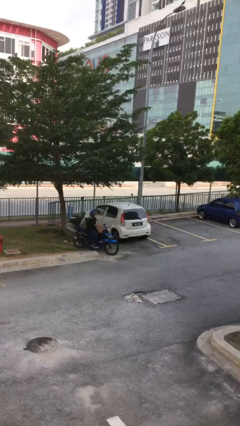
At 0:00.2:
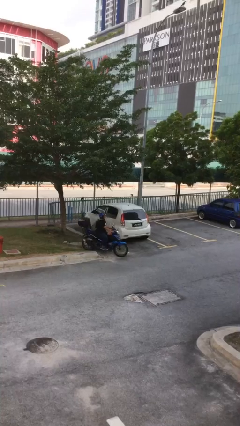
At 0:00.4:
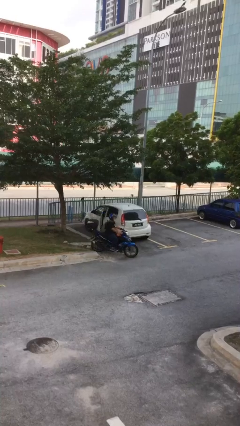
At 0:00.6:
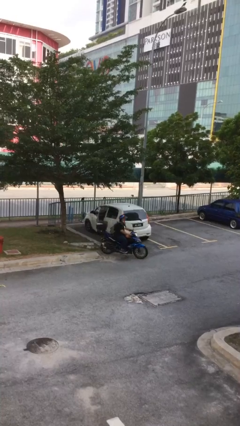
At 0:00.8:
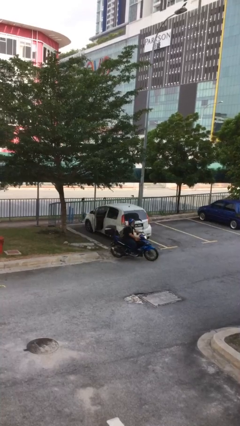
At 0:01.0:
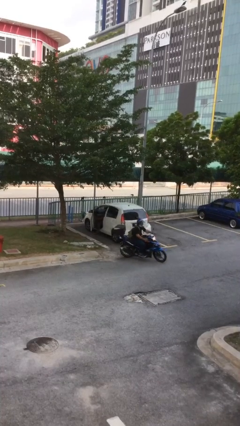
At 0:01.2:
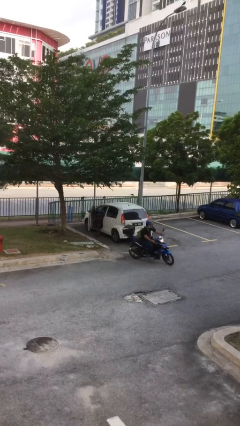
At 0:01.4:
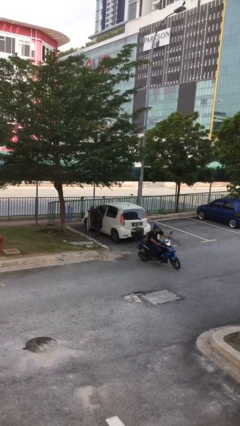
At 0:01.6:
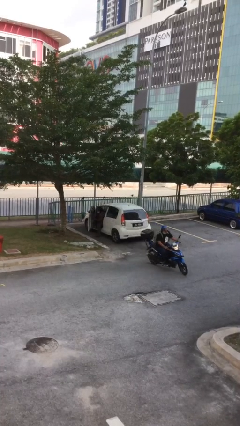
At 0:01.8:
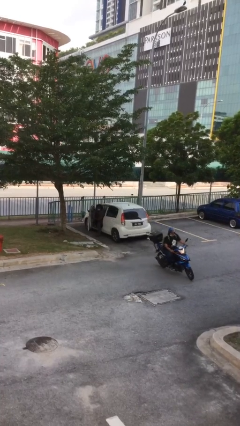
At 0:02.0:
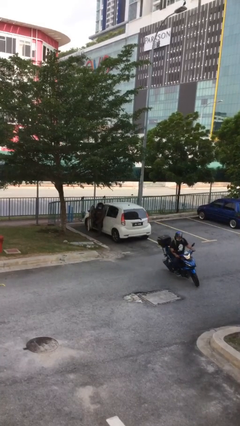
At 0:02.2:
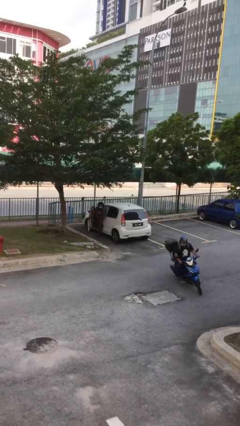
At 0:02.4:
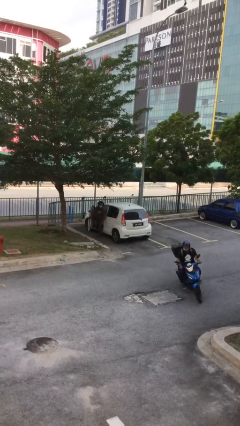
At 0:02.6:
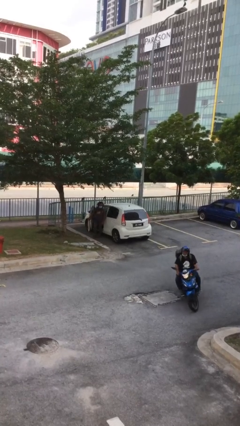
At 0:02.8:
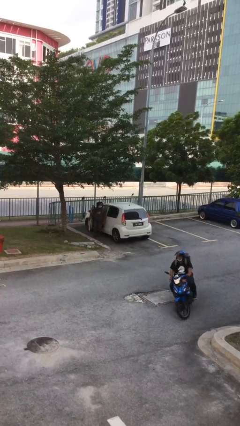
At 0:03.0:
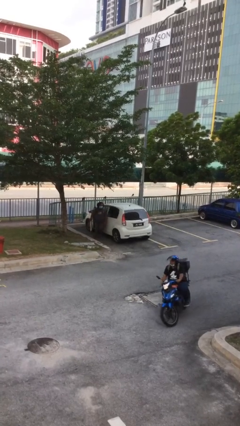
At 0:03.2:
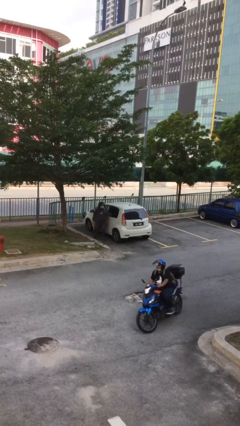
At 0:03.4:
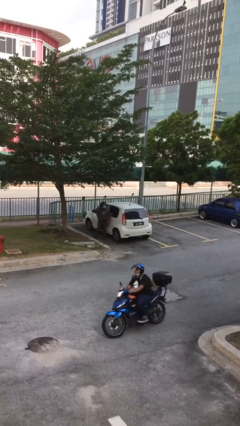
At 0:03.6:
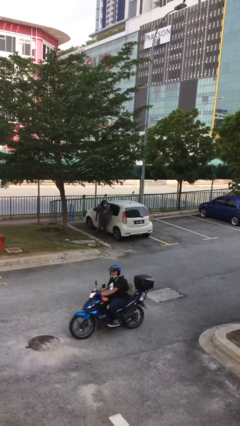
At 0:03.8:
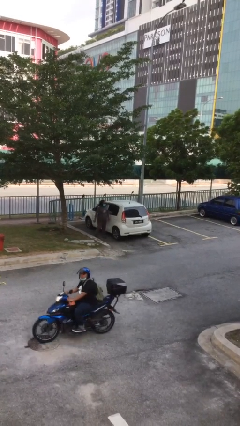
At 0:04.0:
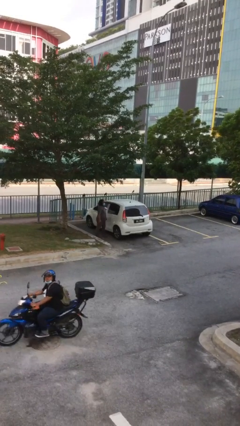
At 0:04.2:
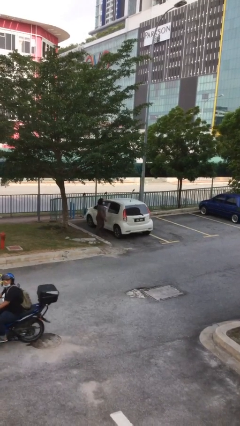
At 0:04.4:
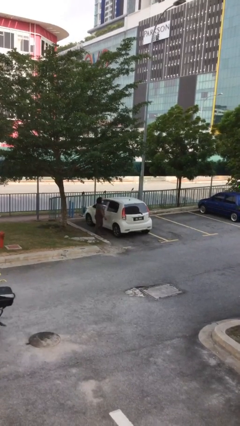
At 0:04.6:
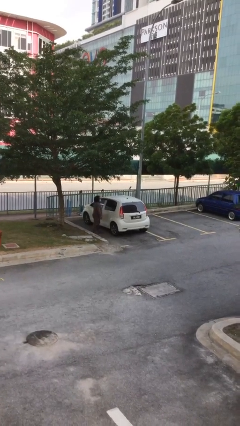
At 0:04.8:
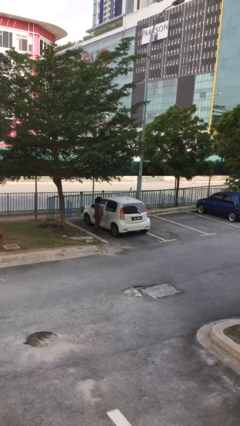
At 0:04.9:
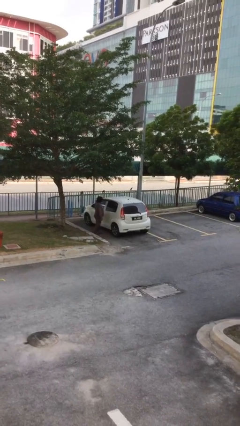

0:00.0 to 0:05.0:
car drops off person

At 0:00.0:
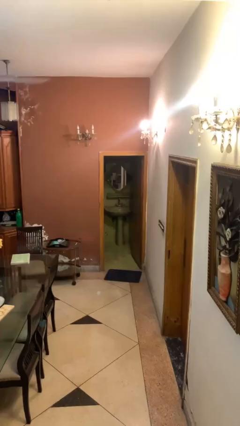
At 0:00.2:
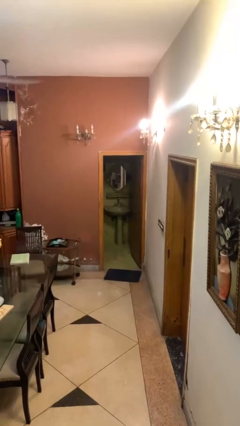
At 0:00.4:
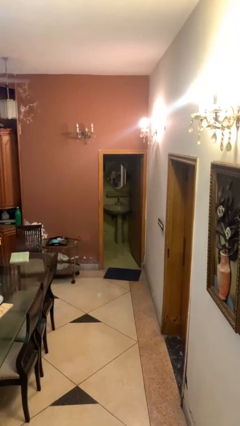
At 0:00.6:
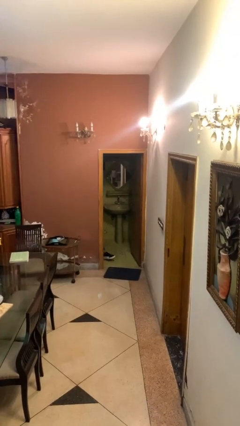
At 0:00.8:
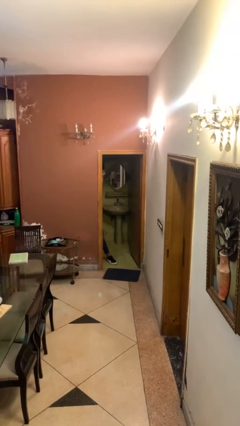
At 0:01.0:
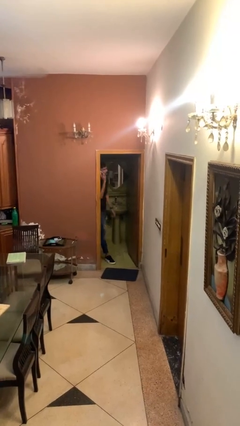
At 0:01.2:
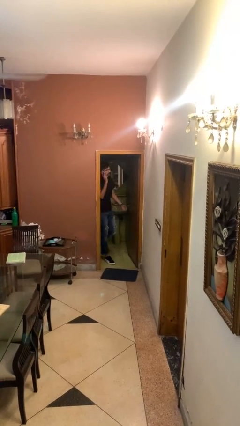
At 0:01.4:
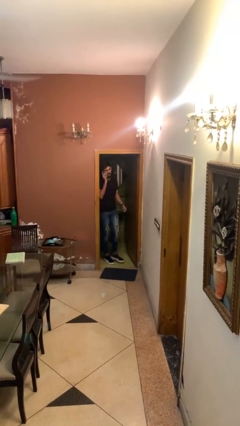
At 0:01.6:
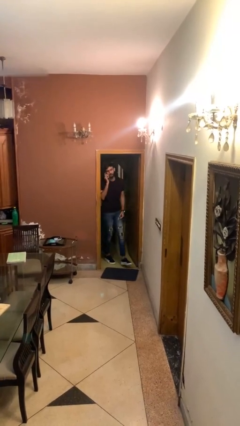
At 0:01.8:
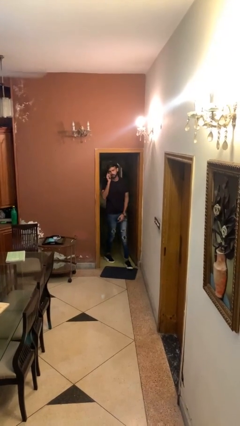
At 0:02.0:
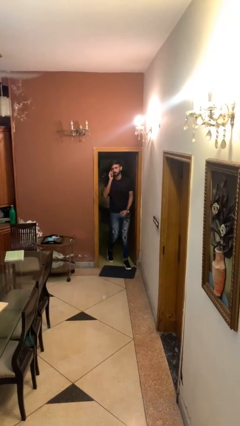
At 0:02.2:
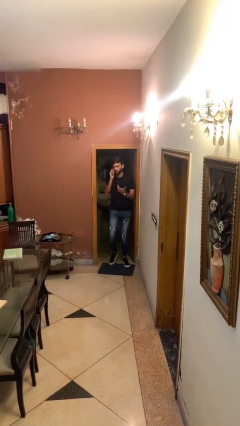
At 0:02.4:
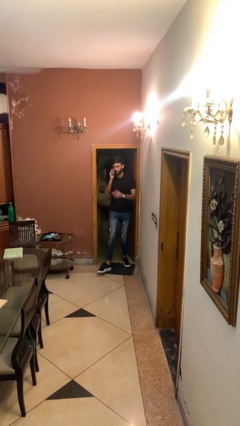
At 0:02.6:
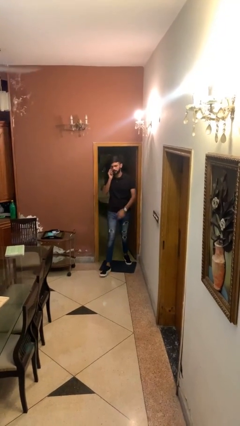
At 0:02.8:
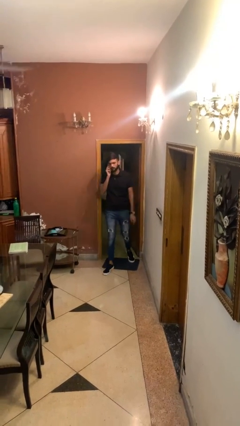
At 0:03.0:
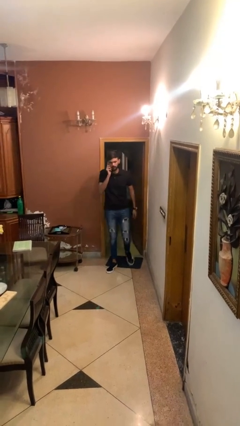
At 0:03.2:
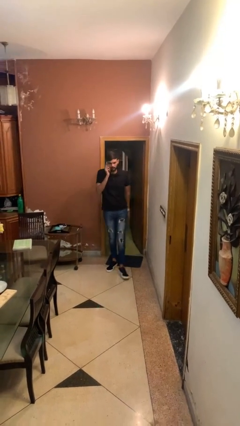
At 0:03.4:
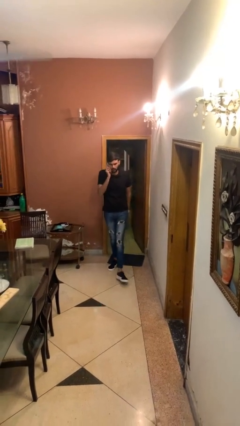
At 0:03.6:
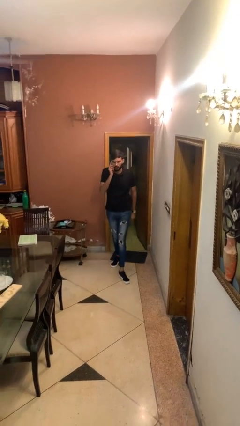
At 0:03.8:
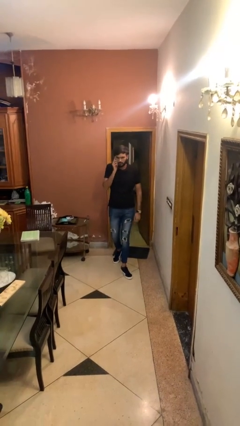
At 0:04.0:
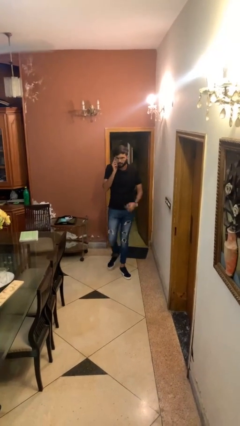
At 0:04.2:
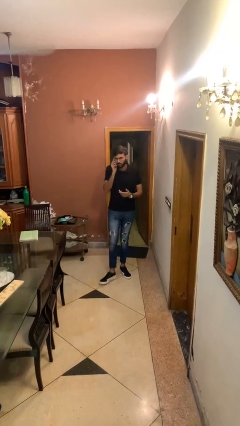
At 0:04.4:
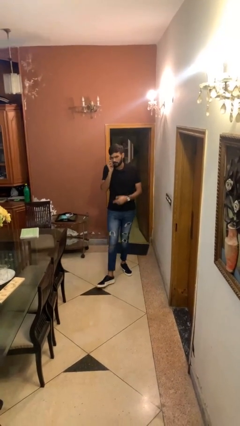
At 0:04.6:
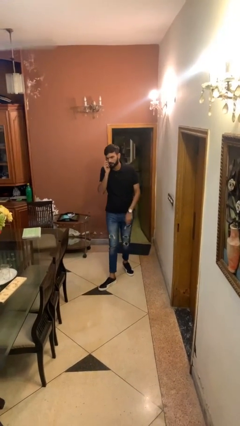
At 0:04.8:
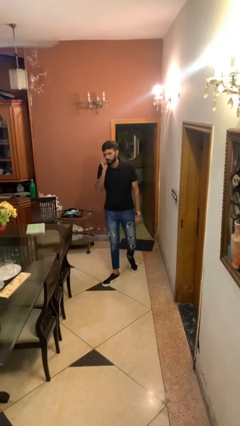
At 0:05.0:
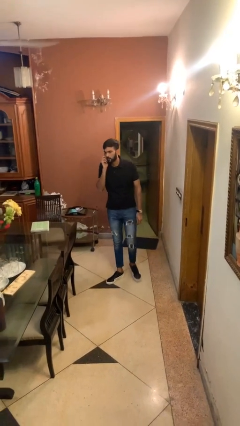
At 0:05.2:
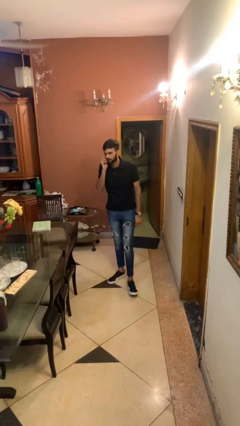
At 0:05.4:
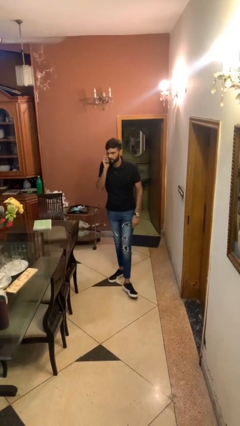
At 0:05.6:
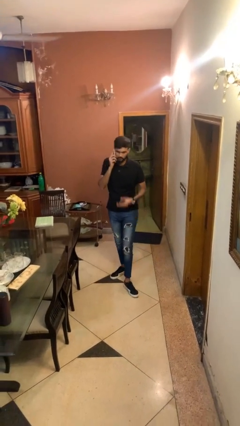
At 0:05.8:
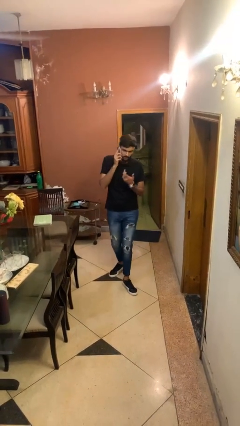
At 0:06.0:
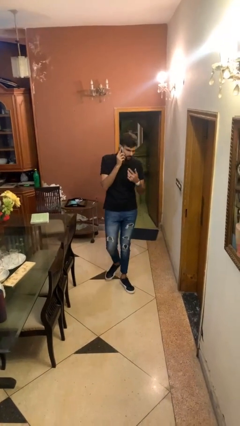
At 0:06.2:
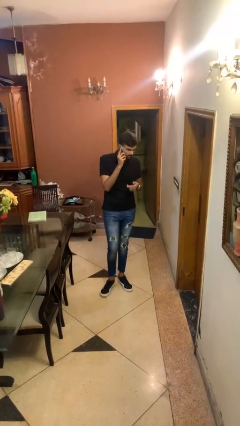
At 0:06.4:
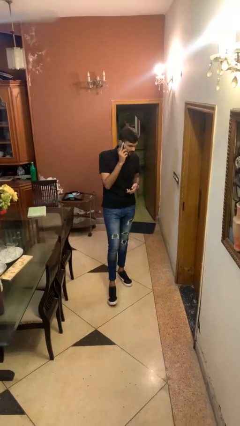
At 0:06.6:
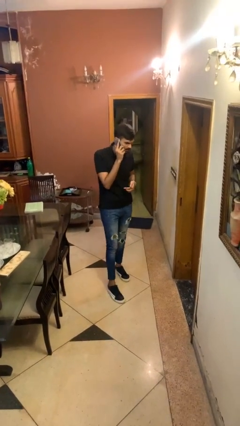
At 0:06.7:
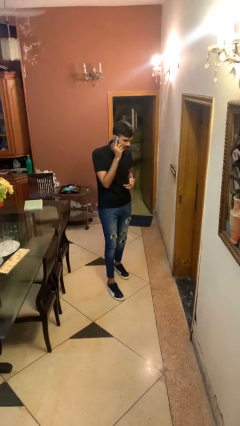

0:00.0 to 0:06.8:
person enters scene through structure

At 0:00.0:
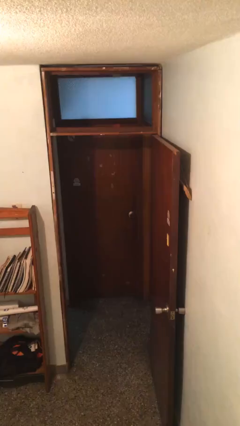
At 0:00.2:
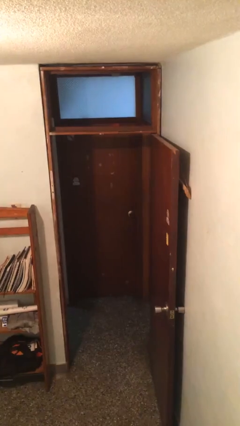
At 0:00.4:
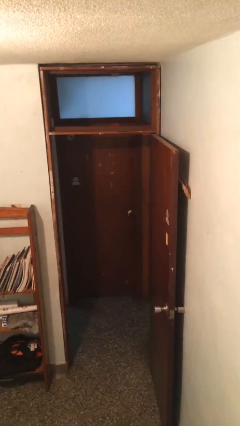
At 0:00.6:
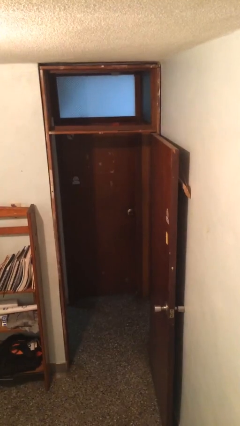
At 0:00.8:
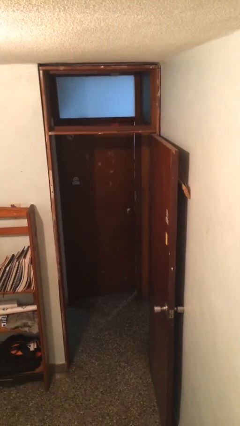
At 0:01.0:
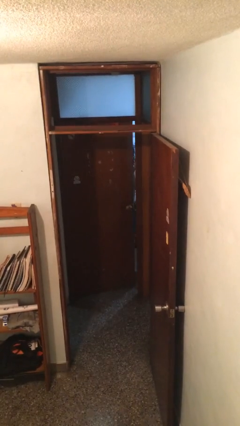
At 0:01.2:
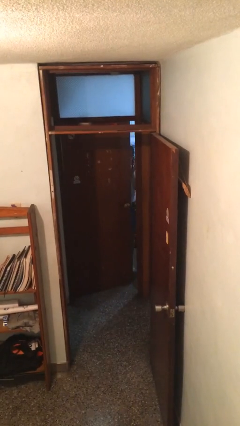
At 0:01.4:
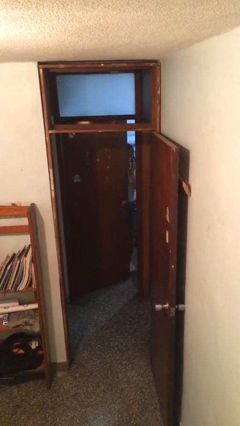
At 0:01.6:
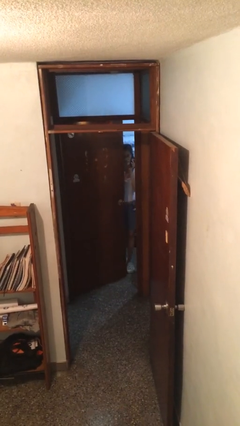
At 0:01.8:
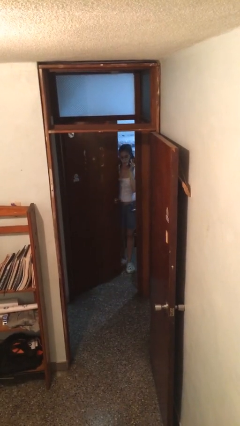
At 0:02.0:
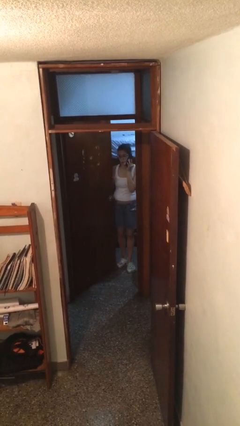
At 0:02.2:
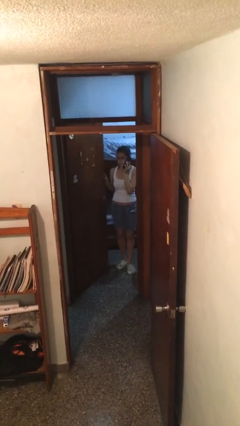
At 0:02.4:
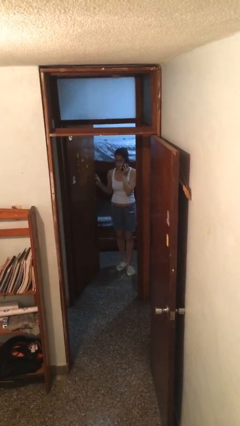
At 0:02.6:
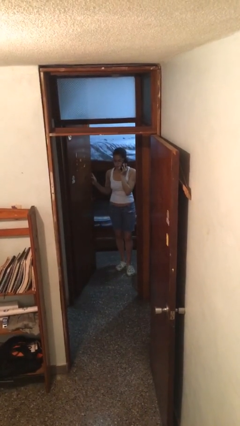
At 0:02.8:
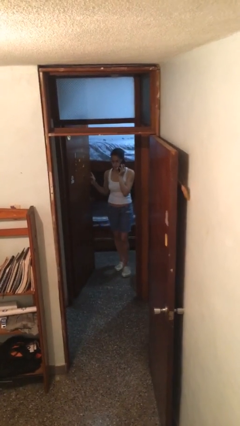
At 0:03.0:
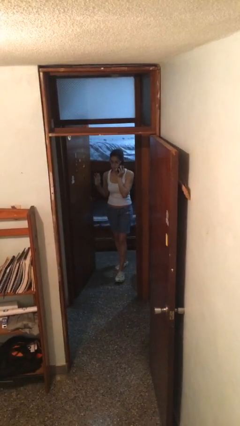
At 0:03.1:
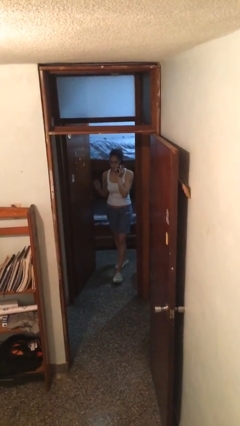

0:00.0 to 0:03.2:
person opens facility door

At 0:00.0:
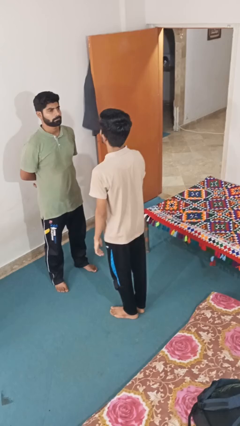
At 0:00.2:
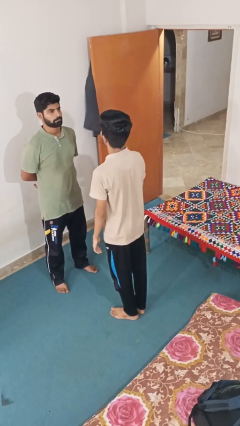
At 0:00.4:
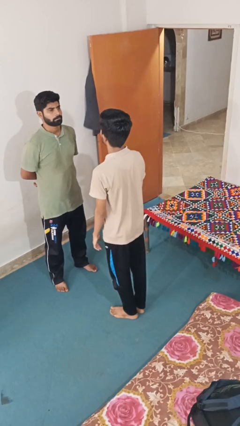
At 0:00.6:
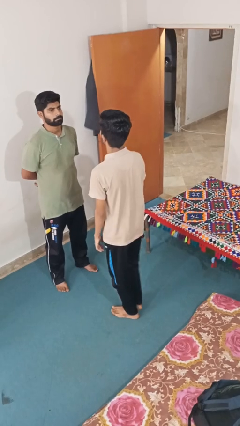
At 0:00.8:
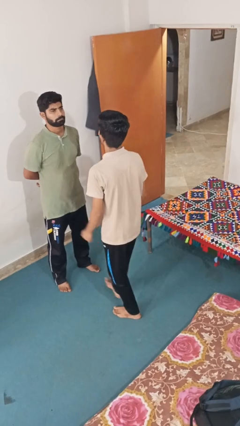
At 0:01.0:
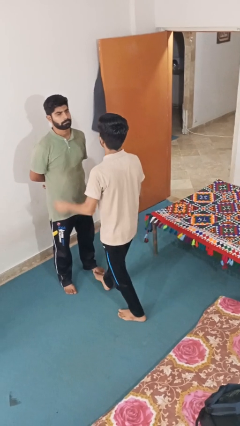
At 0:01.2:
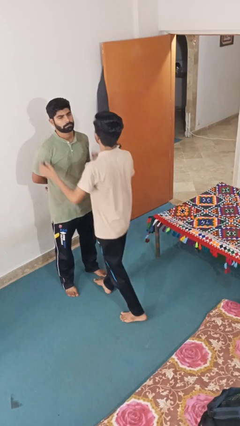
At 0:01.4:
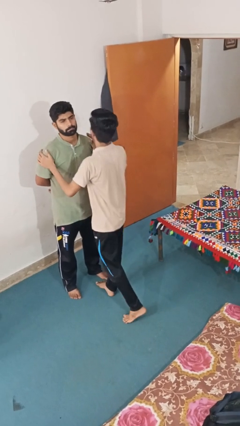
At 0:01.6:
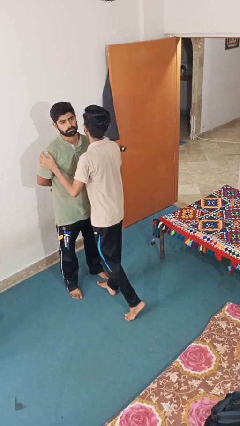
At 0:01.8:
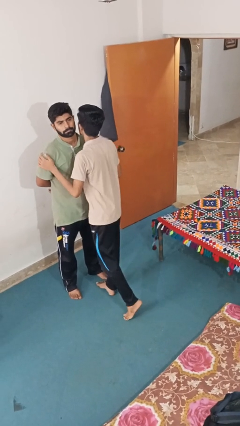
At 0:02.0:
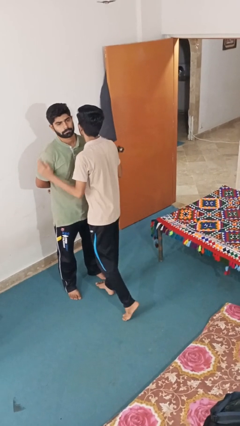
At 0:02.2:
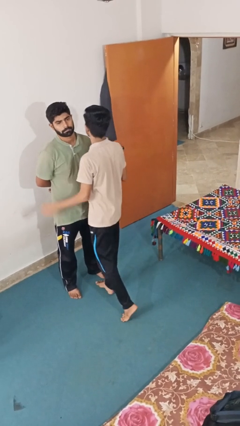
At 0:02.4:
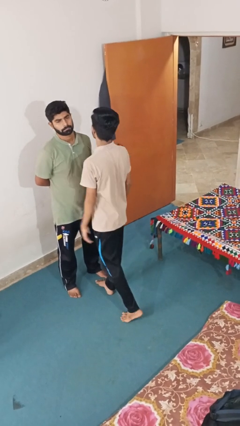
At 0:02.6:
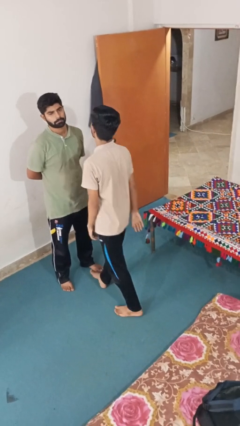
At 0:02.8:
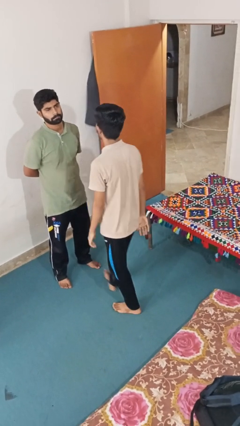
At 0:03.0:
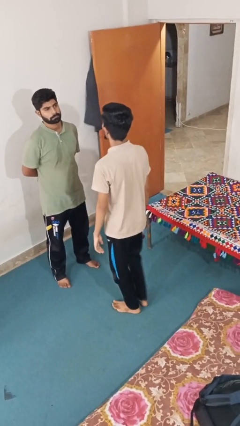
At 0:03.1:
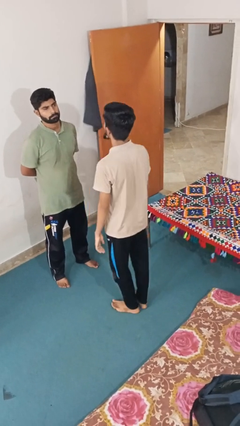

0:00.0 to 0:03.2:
person kisses cheek of person
